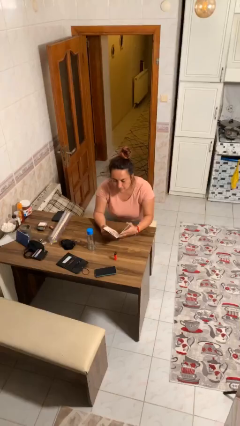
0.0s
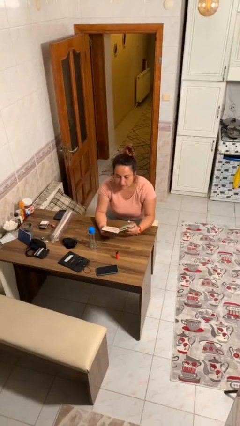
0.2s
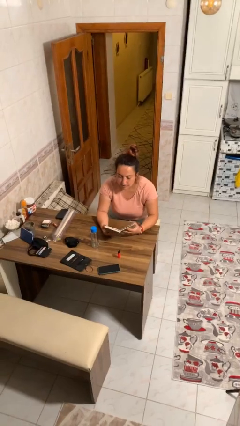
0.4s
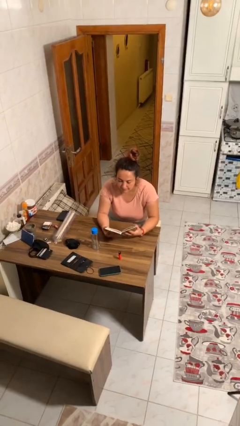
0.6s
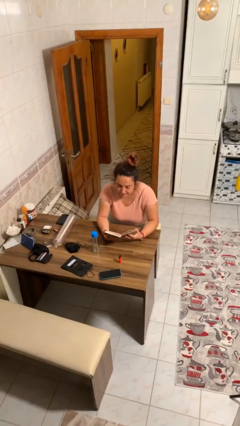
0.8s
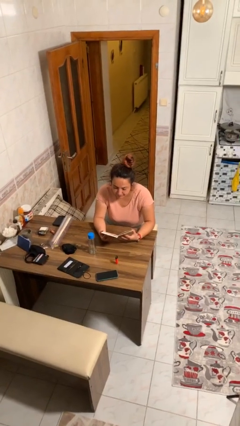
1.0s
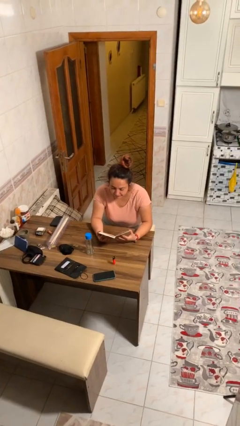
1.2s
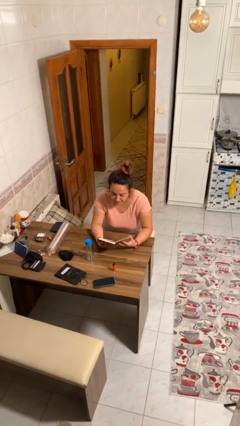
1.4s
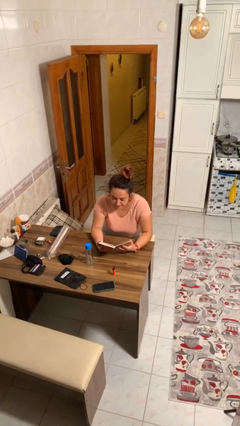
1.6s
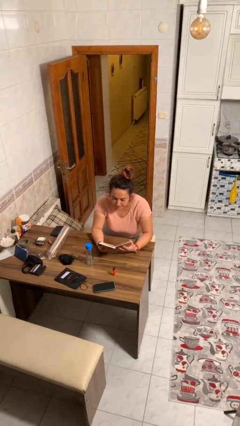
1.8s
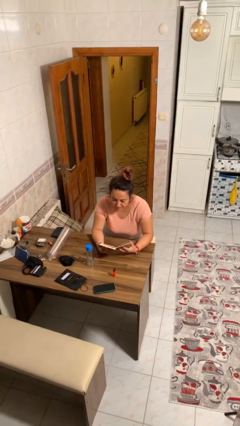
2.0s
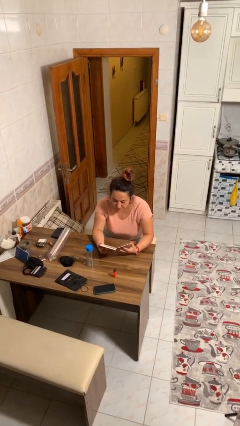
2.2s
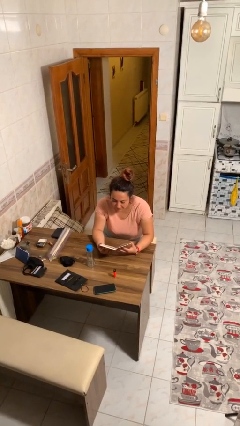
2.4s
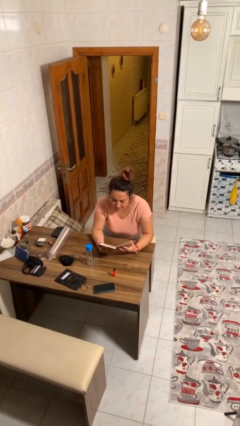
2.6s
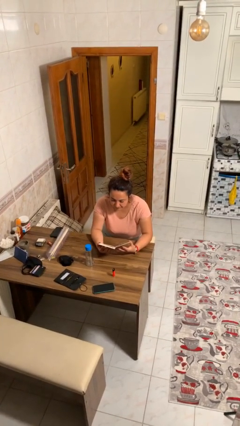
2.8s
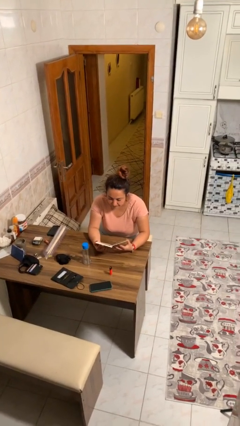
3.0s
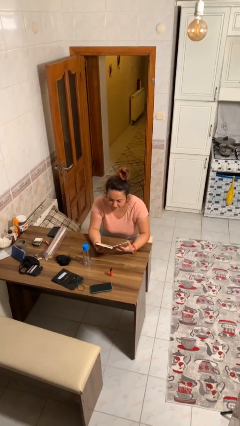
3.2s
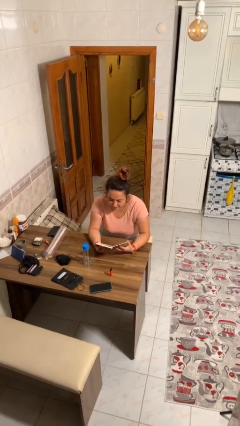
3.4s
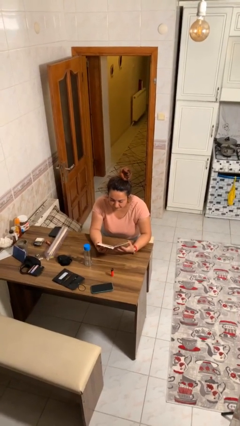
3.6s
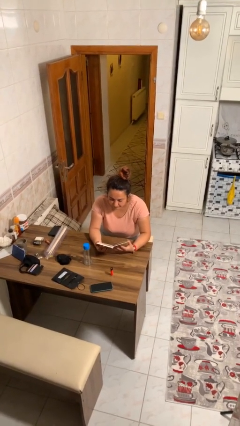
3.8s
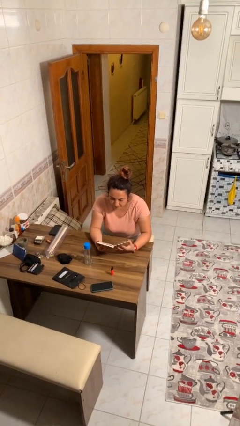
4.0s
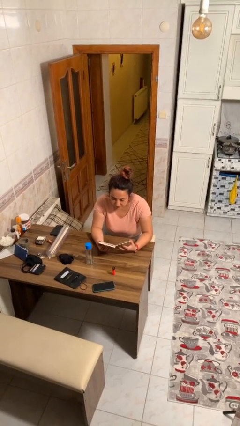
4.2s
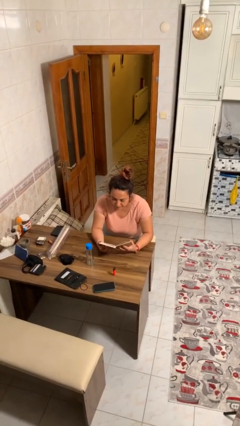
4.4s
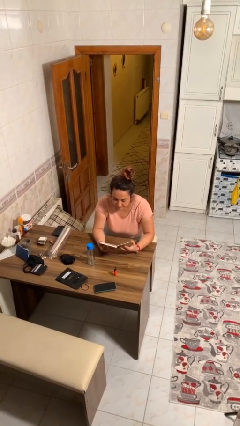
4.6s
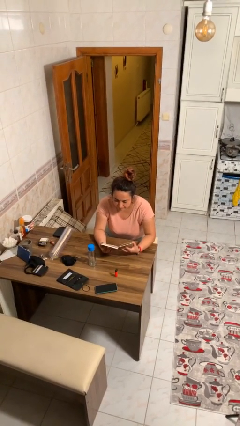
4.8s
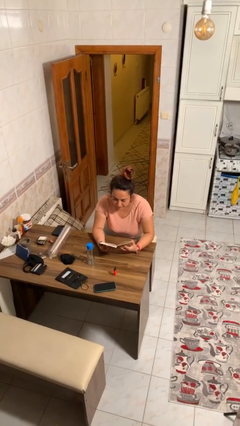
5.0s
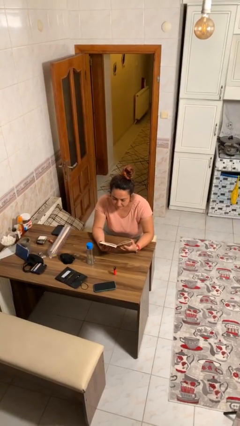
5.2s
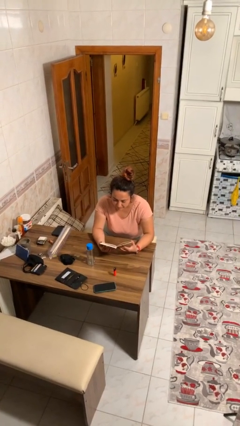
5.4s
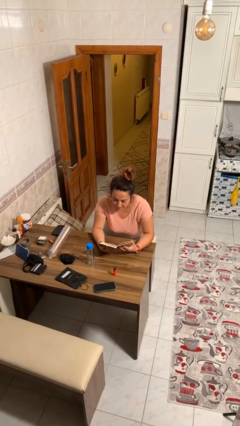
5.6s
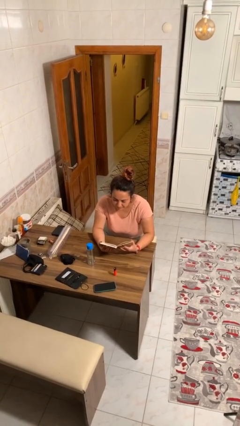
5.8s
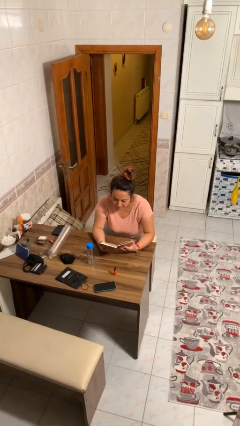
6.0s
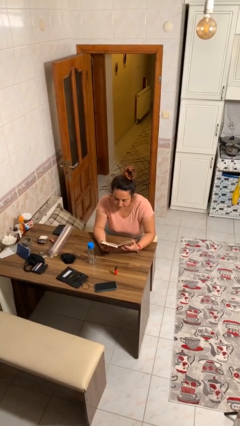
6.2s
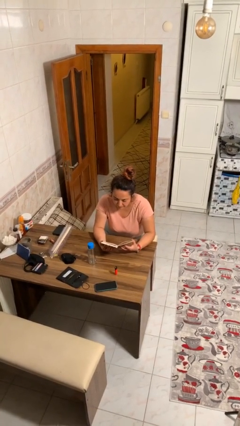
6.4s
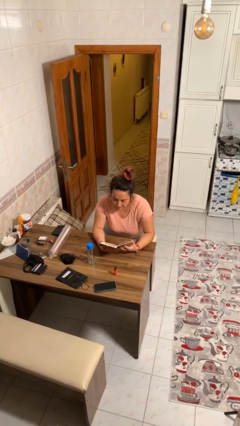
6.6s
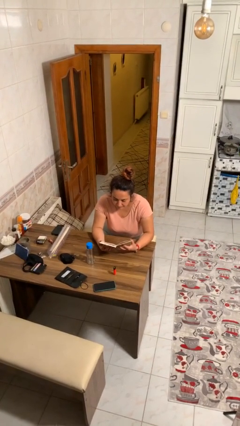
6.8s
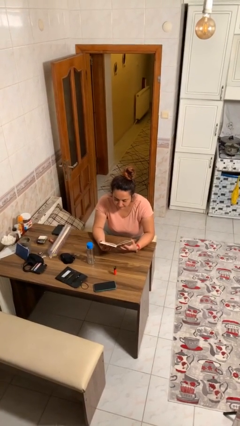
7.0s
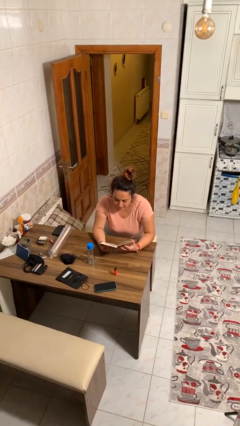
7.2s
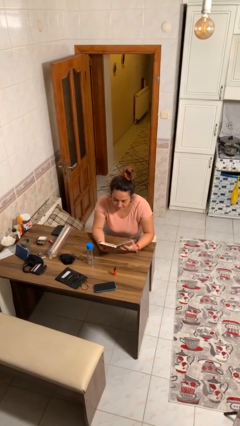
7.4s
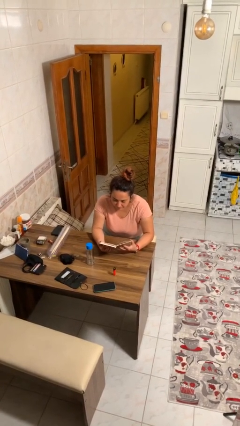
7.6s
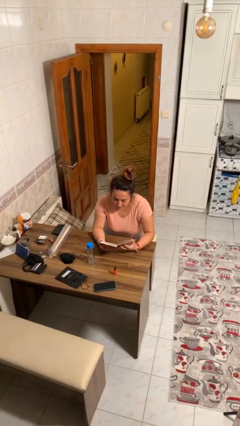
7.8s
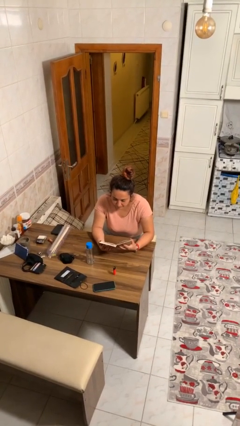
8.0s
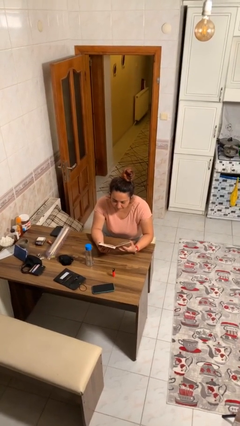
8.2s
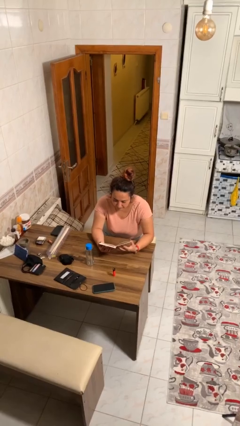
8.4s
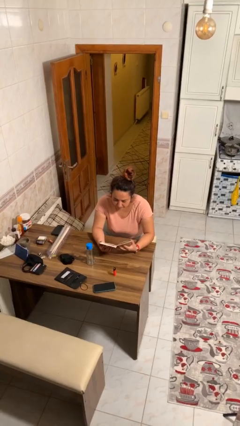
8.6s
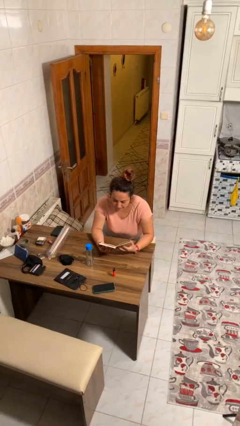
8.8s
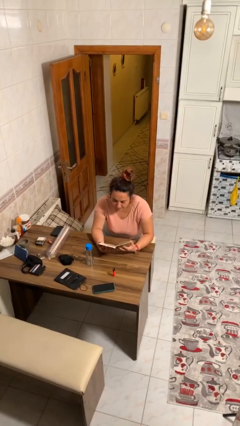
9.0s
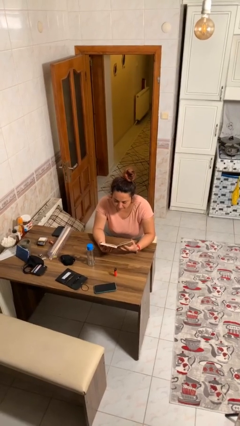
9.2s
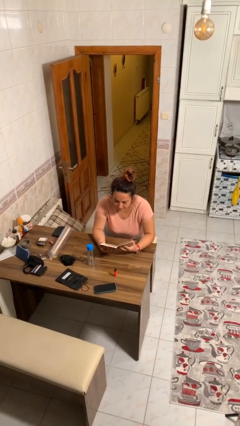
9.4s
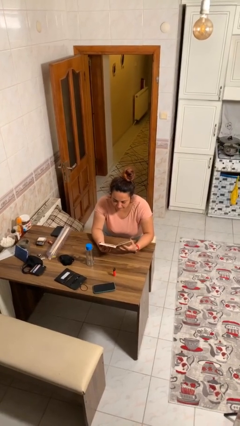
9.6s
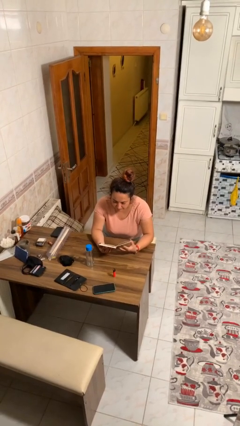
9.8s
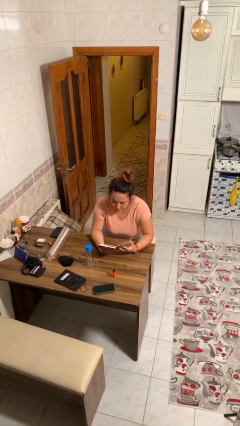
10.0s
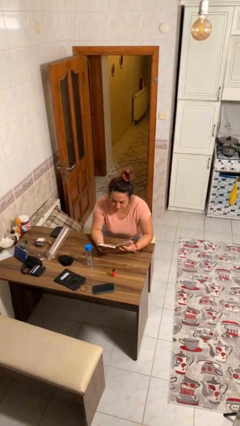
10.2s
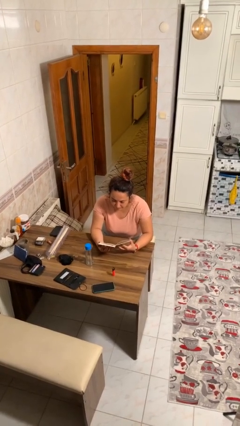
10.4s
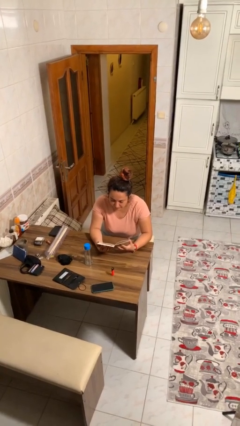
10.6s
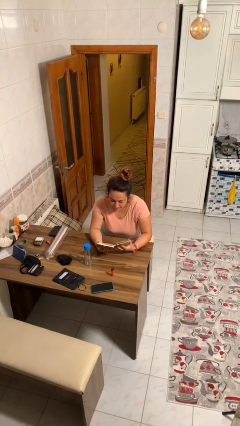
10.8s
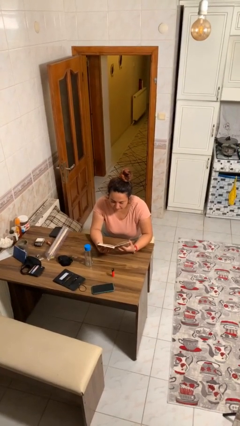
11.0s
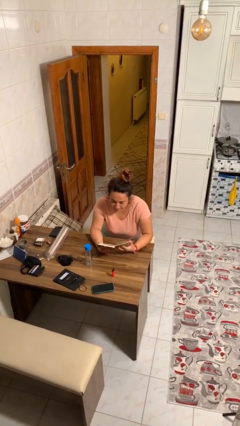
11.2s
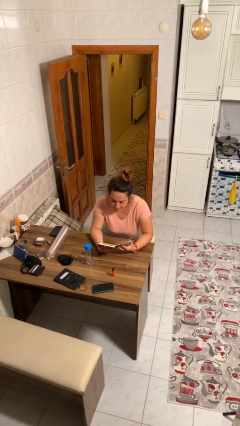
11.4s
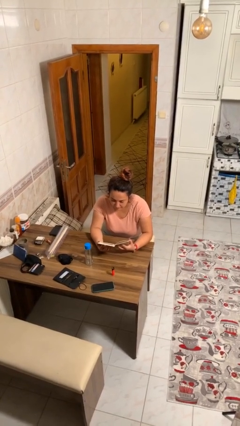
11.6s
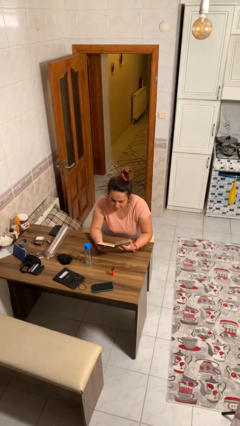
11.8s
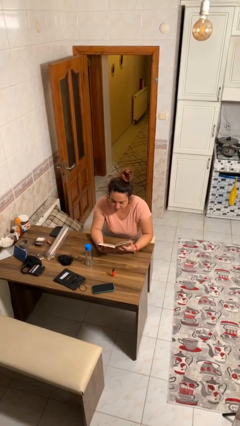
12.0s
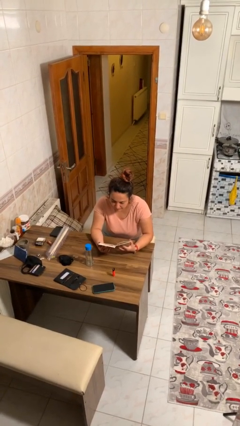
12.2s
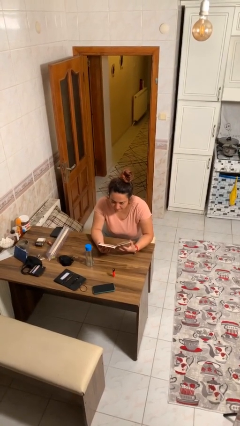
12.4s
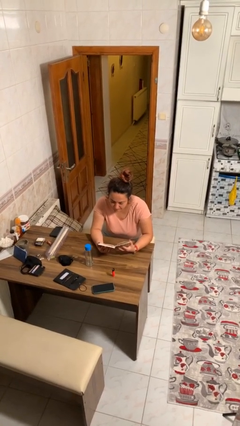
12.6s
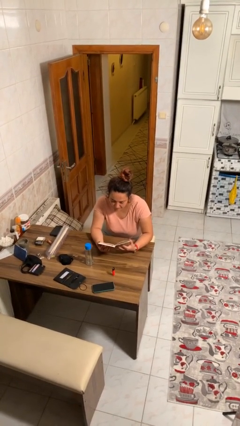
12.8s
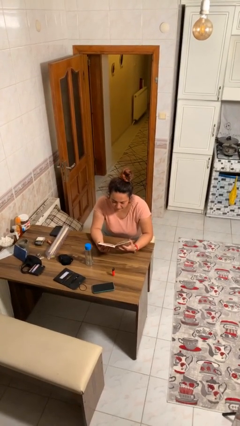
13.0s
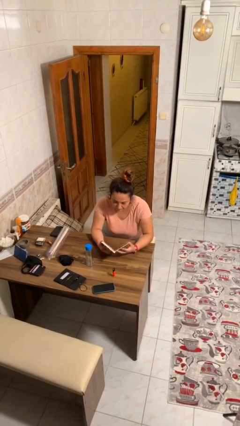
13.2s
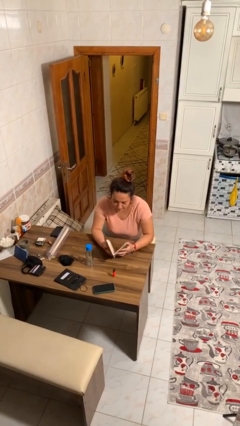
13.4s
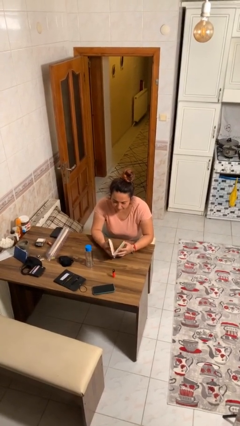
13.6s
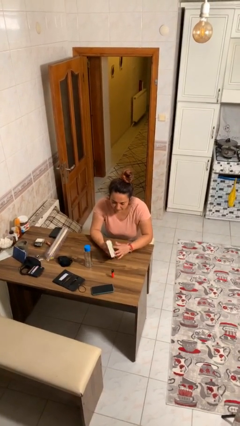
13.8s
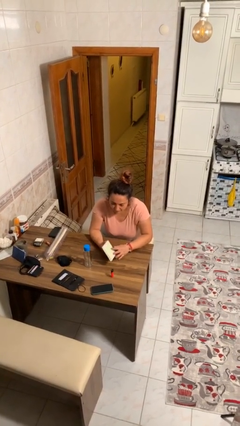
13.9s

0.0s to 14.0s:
person reads document

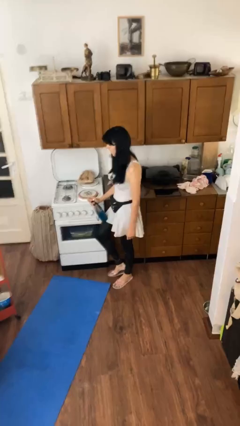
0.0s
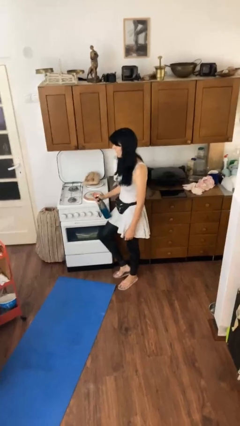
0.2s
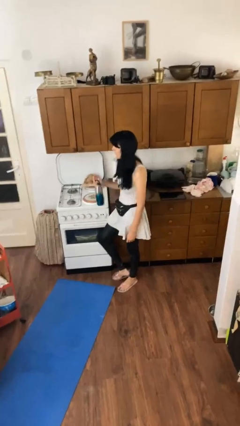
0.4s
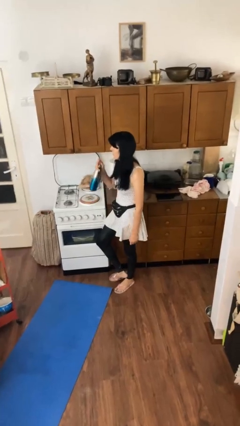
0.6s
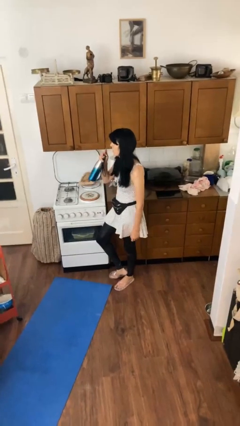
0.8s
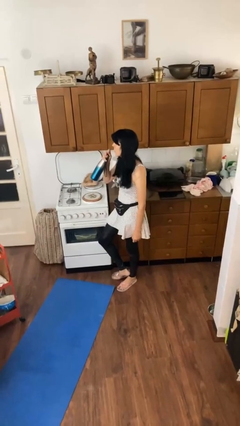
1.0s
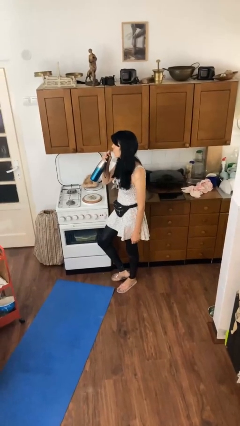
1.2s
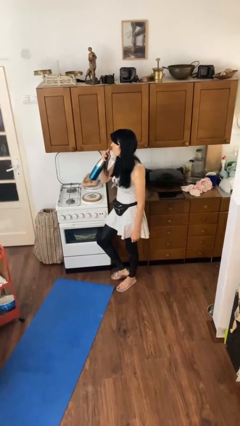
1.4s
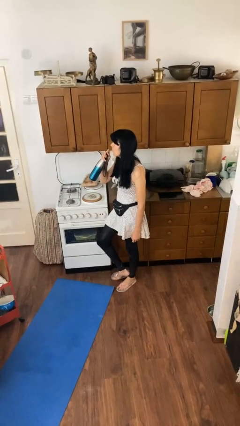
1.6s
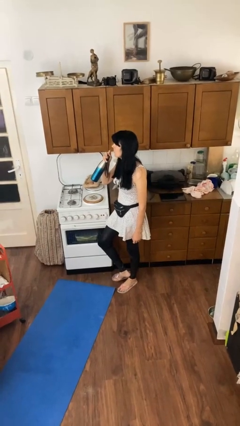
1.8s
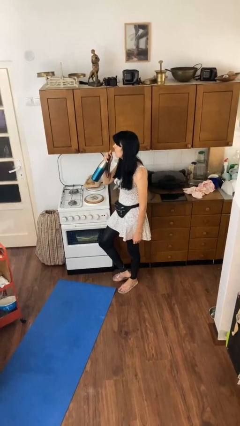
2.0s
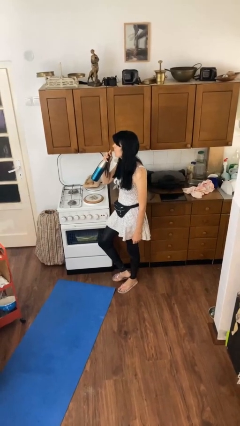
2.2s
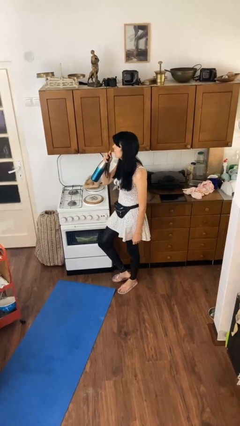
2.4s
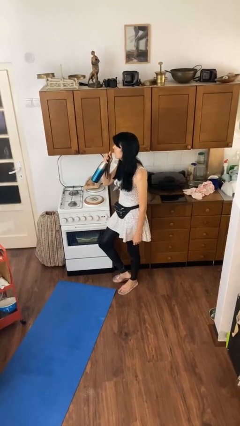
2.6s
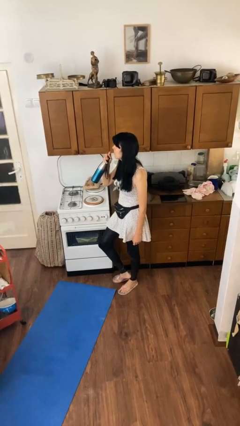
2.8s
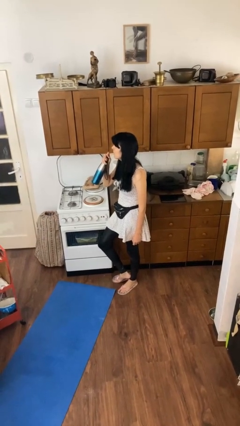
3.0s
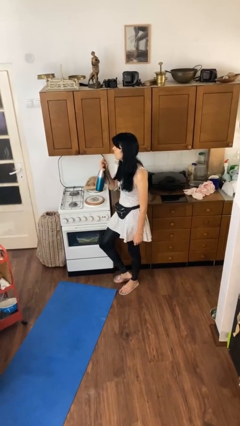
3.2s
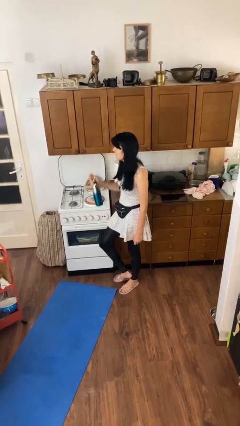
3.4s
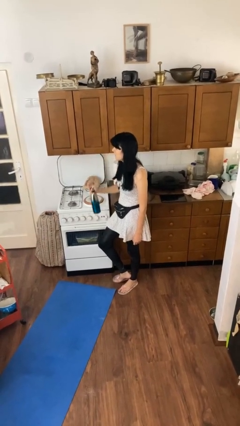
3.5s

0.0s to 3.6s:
person drinks from straw

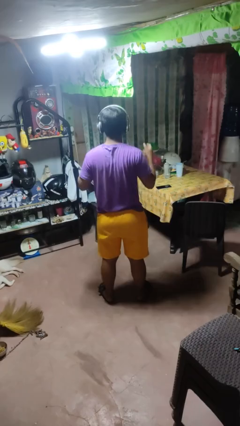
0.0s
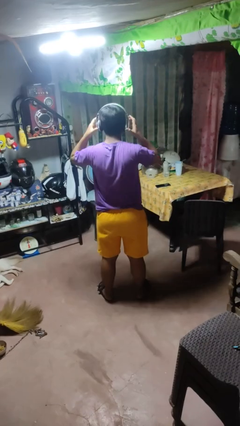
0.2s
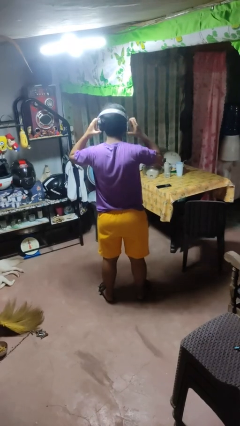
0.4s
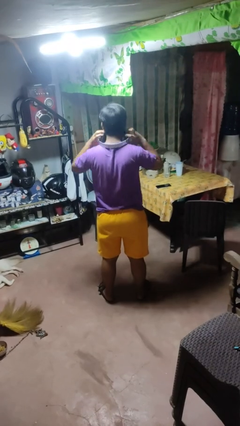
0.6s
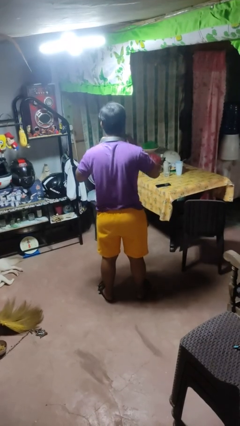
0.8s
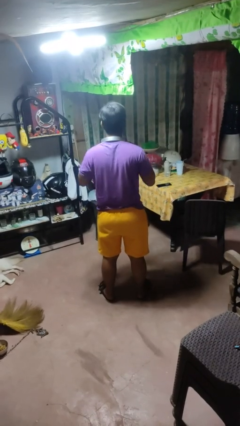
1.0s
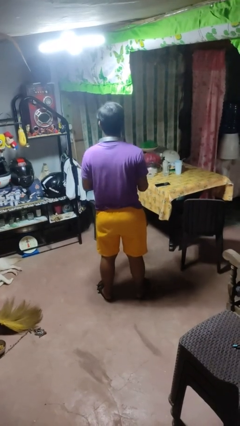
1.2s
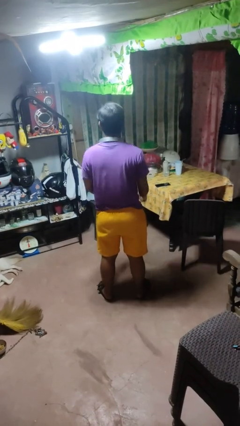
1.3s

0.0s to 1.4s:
person takes off headphones
